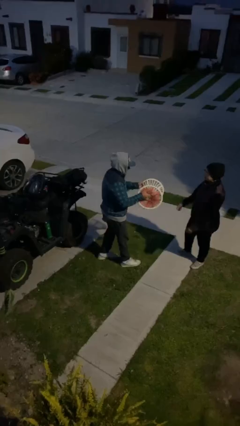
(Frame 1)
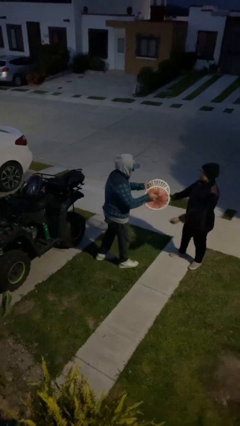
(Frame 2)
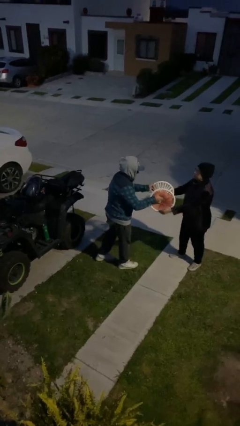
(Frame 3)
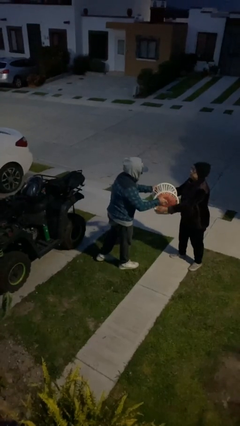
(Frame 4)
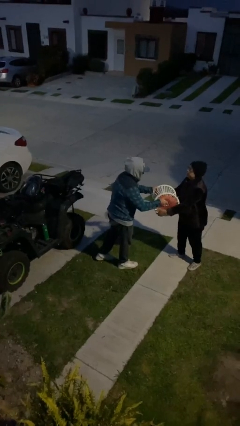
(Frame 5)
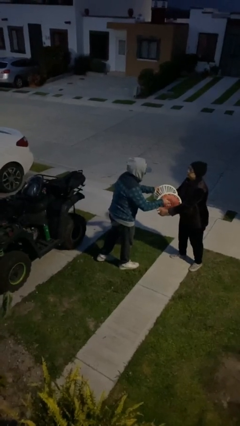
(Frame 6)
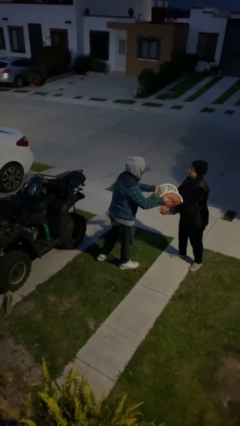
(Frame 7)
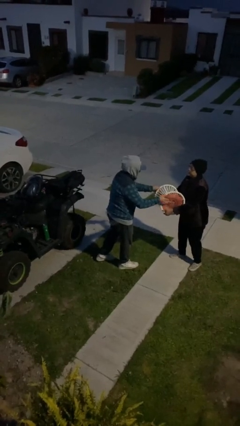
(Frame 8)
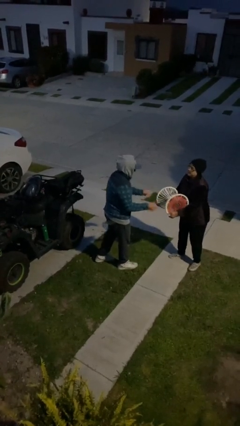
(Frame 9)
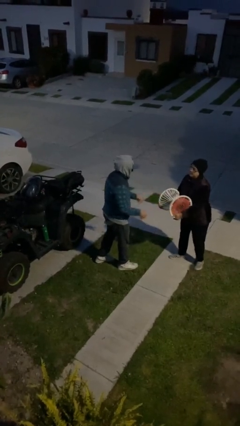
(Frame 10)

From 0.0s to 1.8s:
person transfers object to person

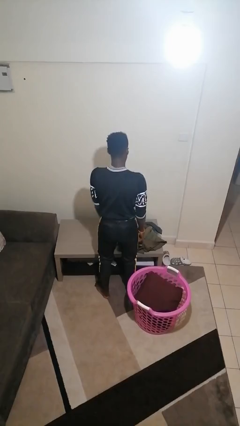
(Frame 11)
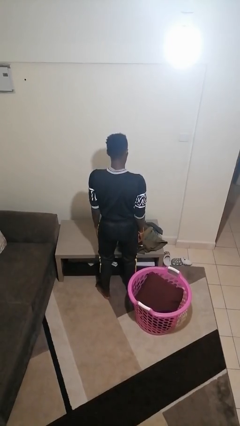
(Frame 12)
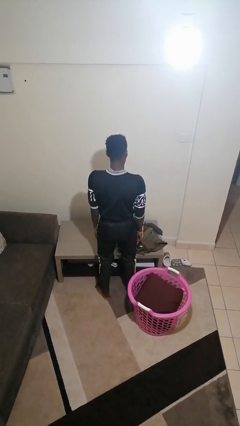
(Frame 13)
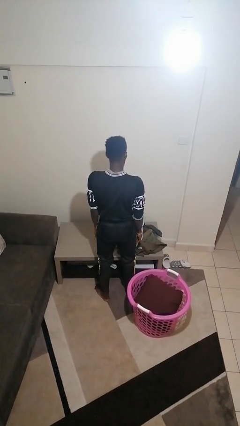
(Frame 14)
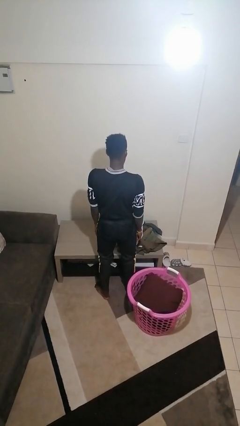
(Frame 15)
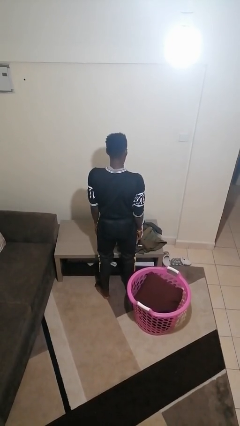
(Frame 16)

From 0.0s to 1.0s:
person folds shirt

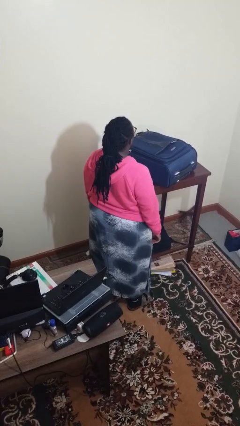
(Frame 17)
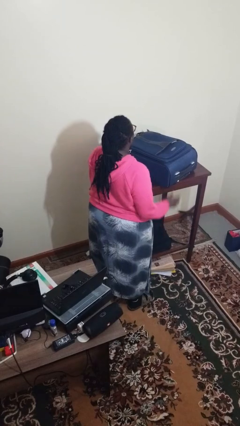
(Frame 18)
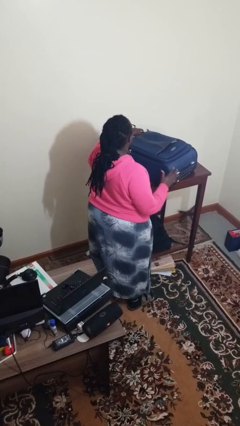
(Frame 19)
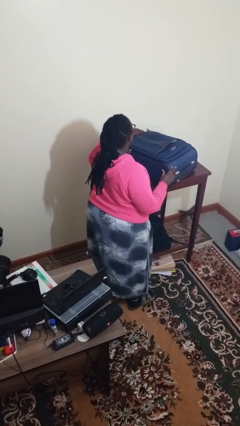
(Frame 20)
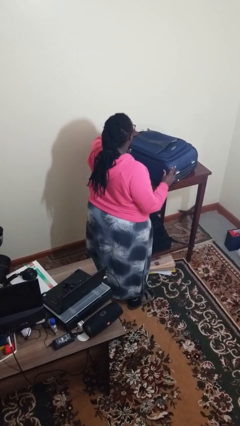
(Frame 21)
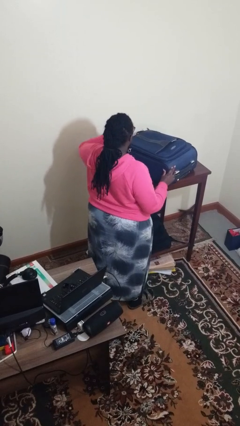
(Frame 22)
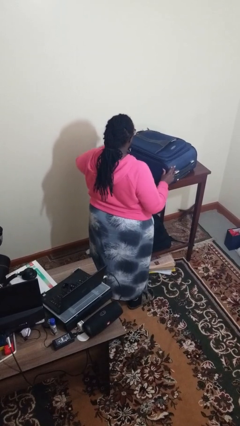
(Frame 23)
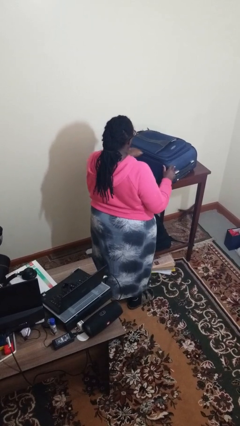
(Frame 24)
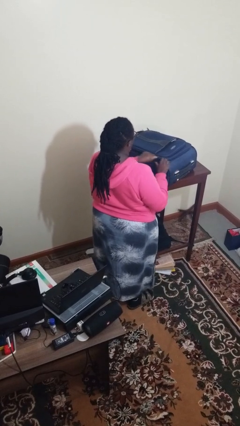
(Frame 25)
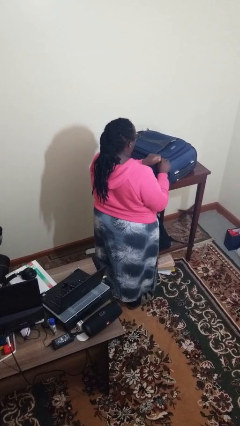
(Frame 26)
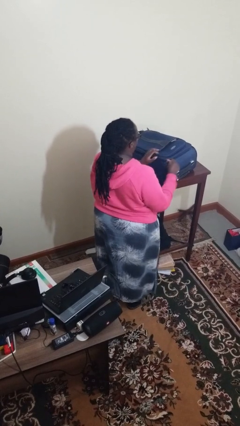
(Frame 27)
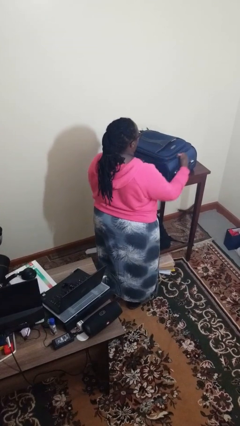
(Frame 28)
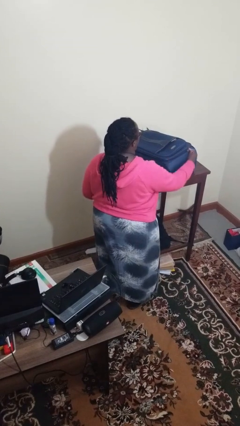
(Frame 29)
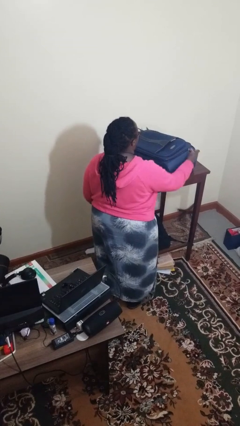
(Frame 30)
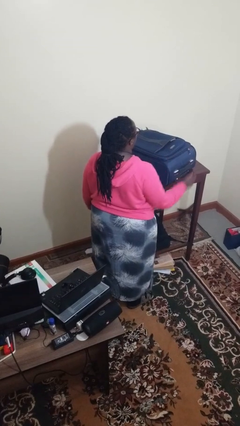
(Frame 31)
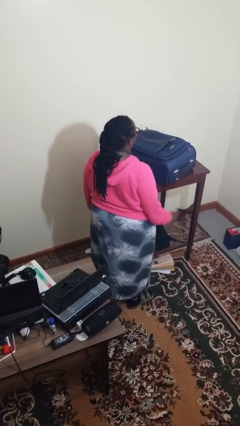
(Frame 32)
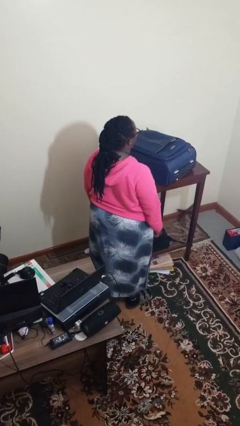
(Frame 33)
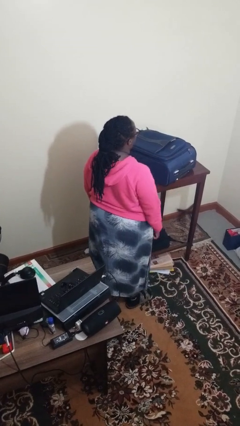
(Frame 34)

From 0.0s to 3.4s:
person opens suitcase

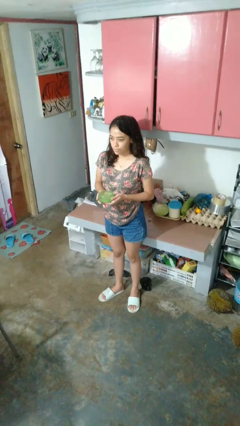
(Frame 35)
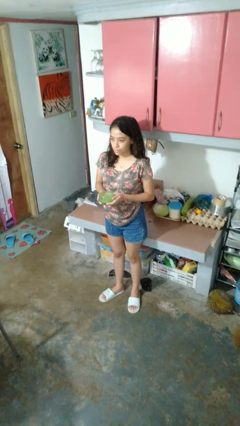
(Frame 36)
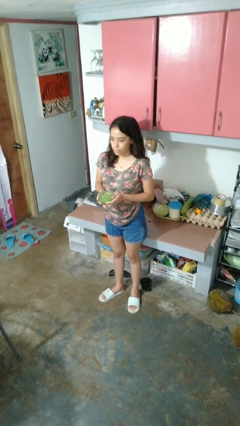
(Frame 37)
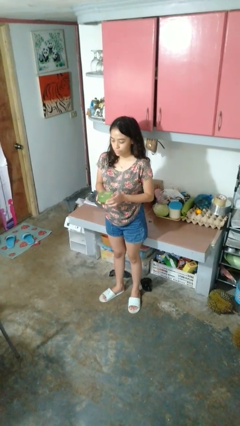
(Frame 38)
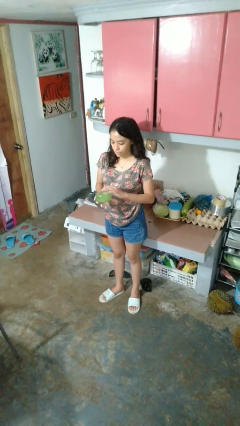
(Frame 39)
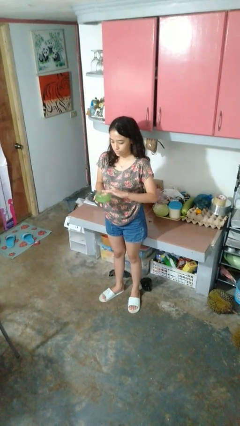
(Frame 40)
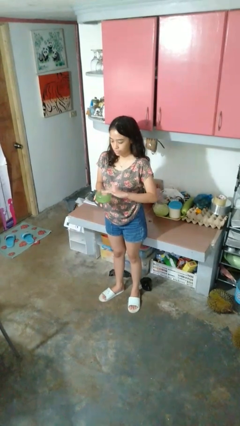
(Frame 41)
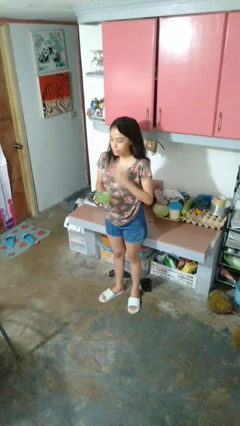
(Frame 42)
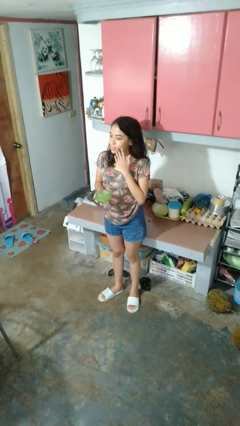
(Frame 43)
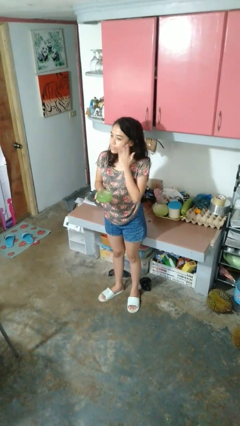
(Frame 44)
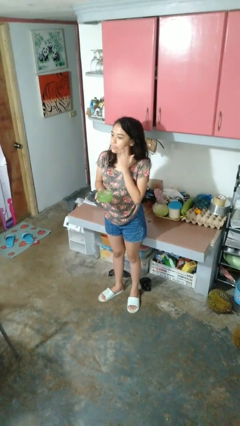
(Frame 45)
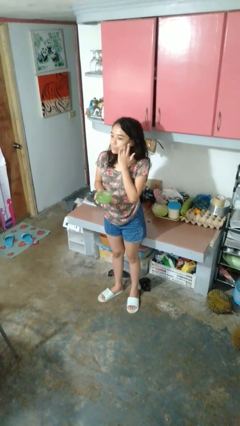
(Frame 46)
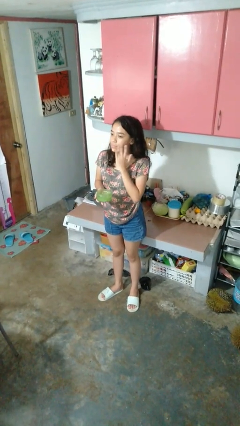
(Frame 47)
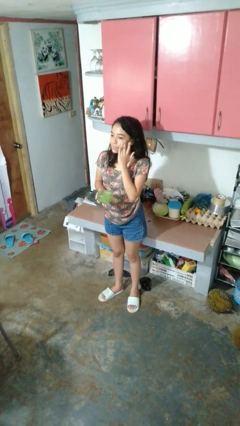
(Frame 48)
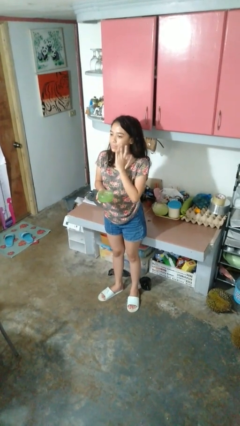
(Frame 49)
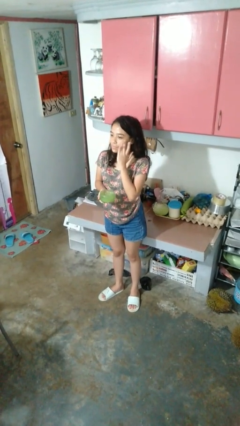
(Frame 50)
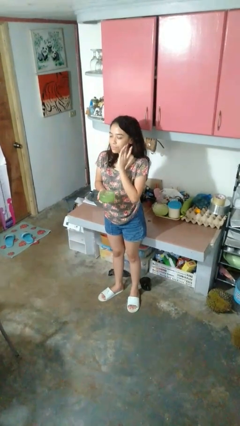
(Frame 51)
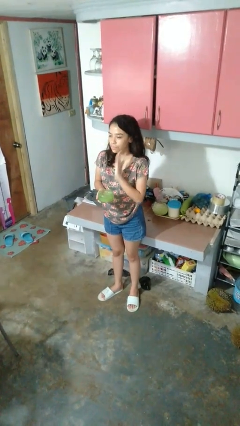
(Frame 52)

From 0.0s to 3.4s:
person applies facial moisturizer

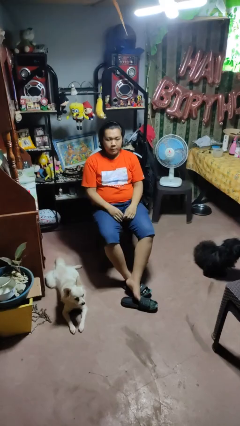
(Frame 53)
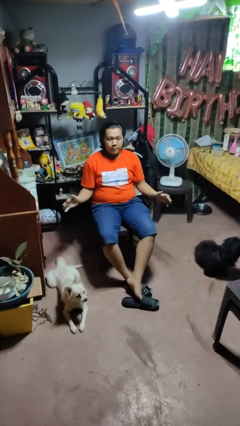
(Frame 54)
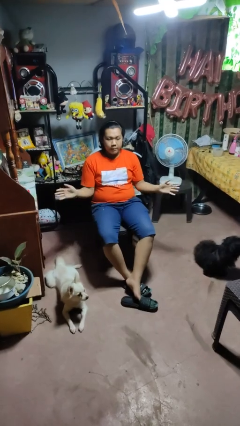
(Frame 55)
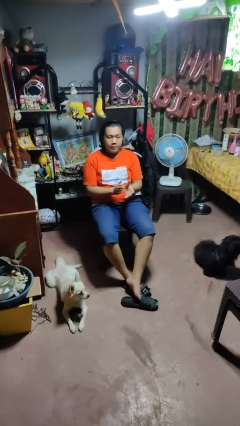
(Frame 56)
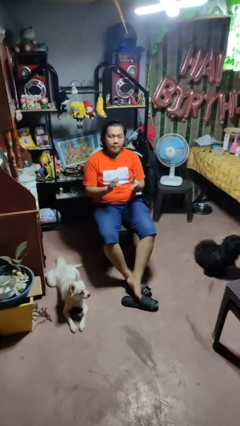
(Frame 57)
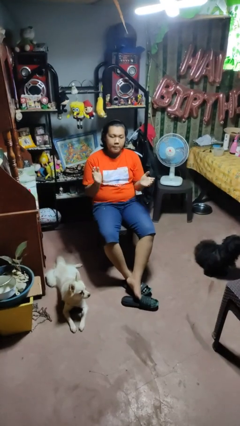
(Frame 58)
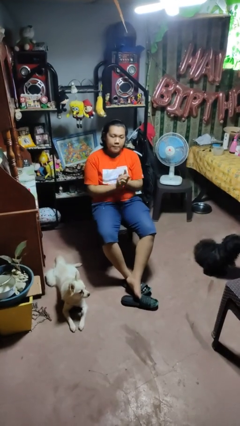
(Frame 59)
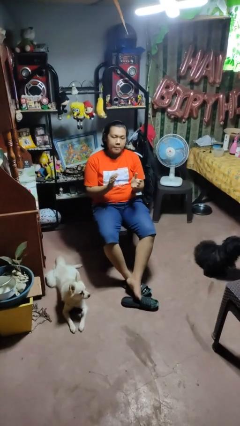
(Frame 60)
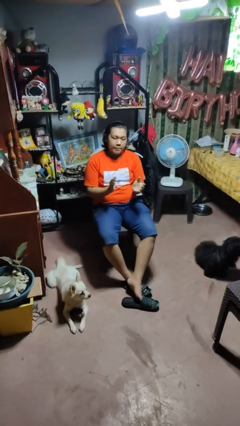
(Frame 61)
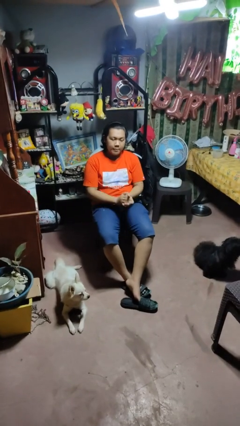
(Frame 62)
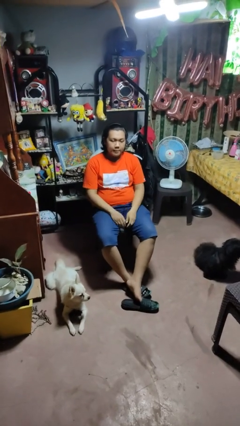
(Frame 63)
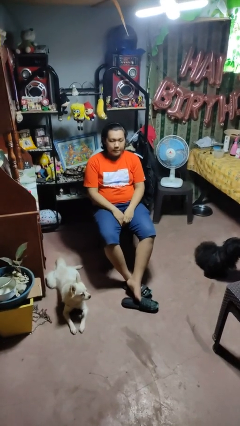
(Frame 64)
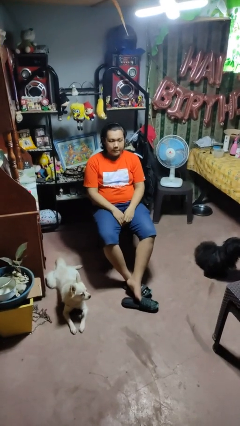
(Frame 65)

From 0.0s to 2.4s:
person claps hands

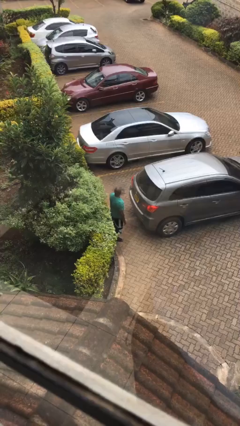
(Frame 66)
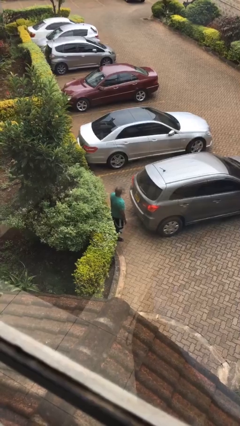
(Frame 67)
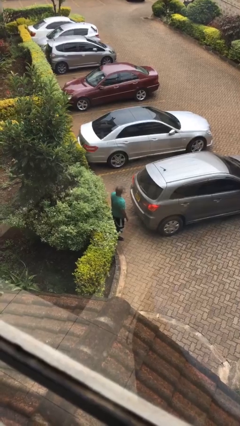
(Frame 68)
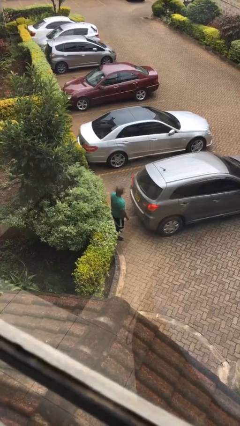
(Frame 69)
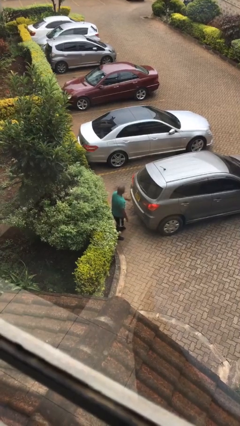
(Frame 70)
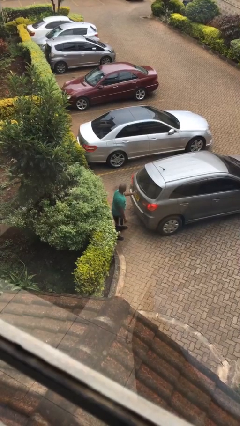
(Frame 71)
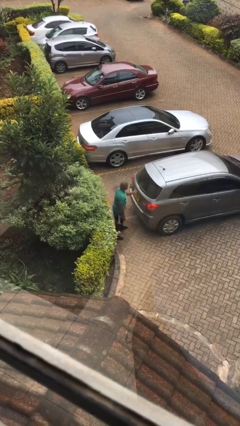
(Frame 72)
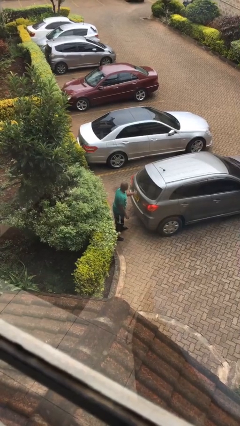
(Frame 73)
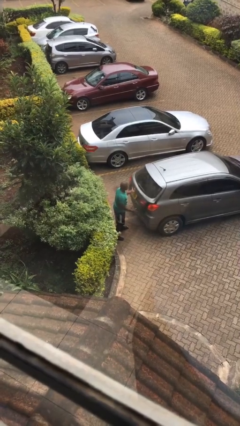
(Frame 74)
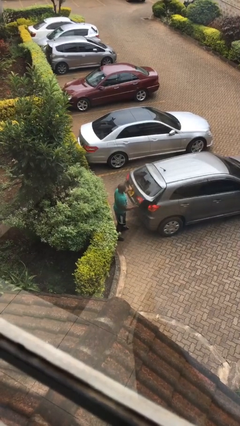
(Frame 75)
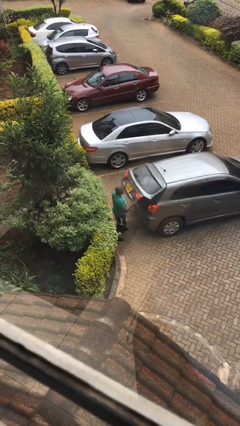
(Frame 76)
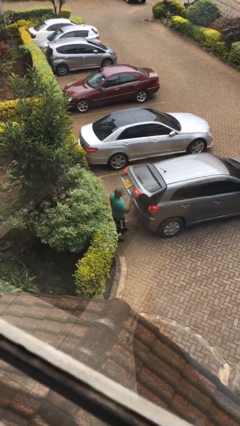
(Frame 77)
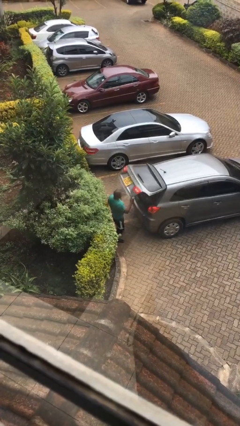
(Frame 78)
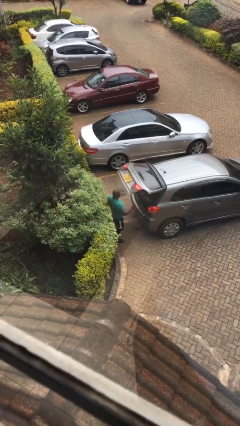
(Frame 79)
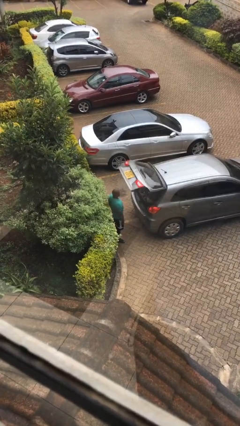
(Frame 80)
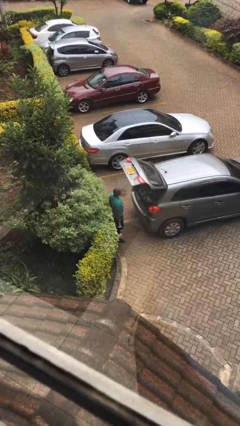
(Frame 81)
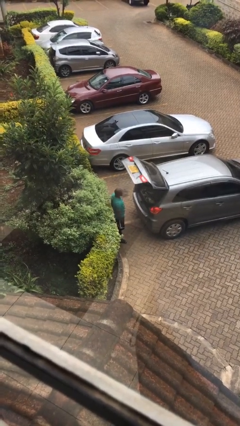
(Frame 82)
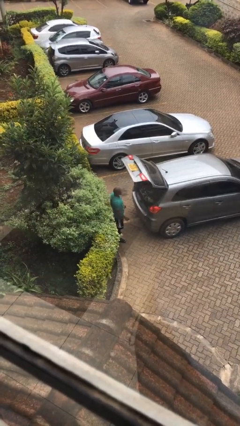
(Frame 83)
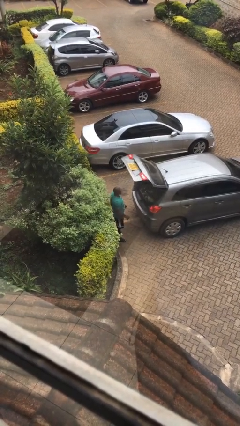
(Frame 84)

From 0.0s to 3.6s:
person opens car trunk

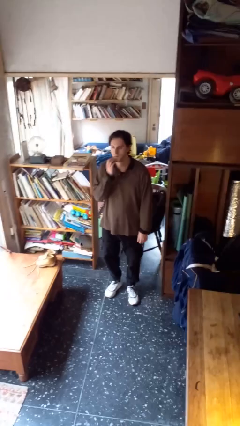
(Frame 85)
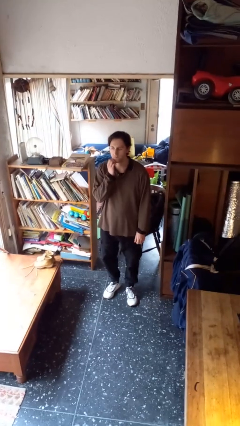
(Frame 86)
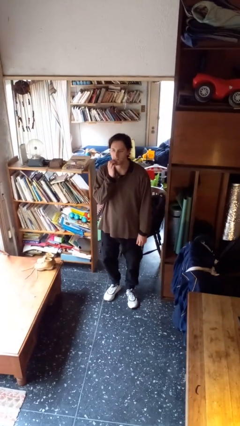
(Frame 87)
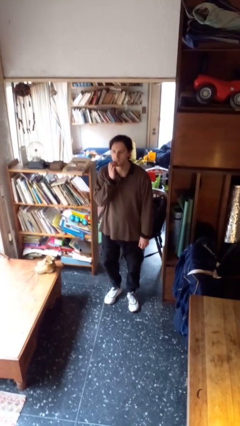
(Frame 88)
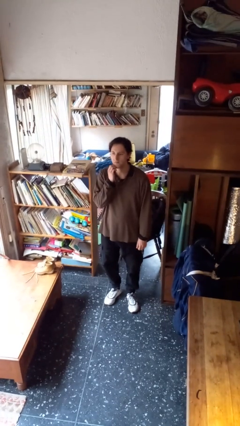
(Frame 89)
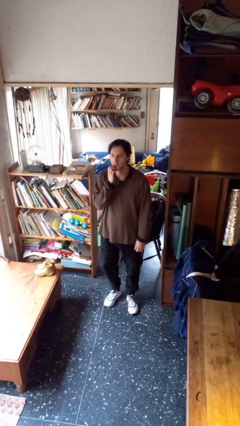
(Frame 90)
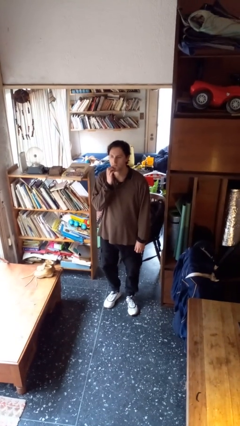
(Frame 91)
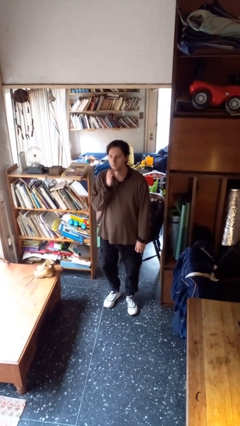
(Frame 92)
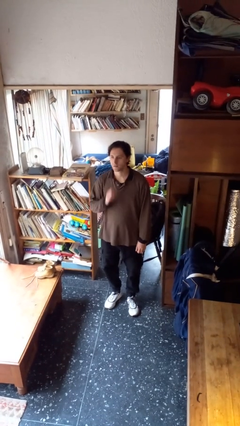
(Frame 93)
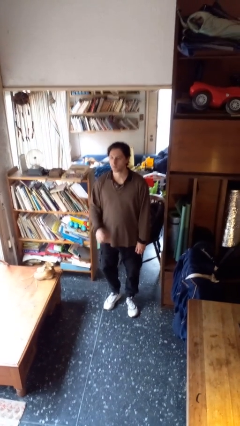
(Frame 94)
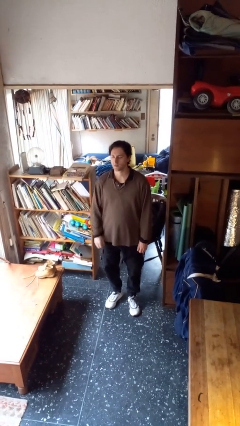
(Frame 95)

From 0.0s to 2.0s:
person scratches face
